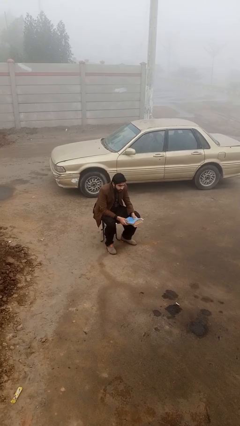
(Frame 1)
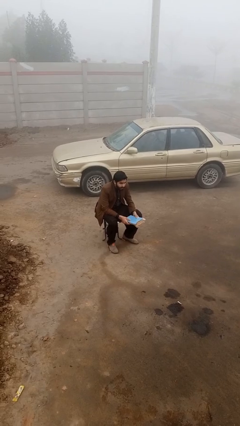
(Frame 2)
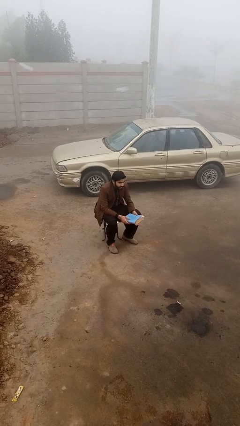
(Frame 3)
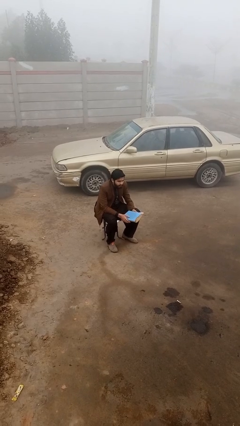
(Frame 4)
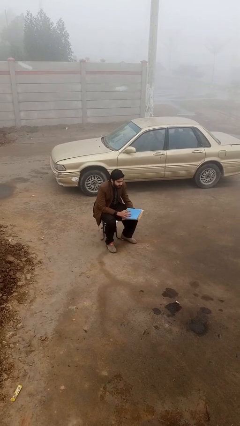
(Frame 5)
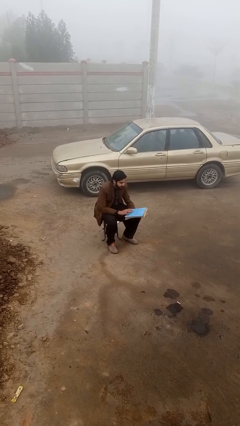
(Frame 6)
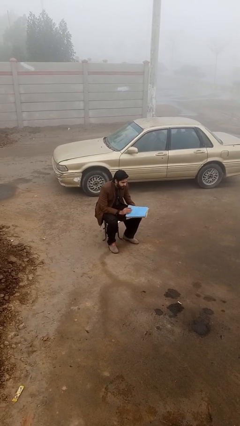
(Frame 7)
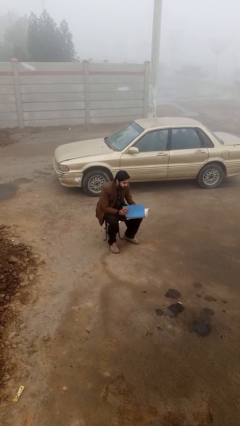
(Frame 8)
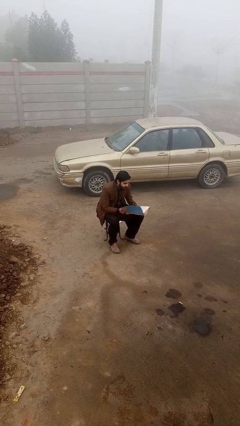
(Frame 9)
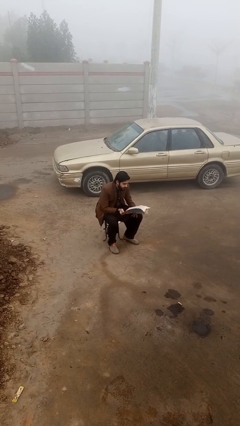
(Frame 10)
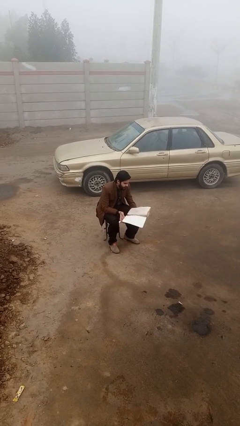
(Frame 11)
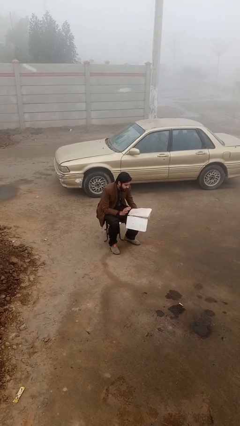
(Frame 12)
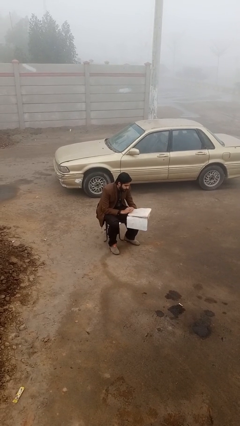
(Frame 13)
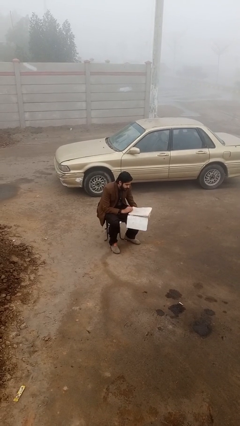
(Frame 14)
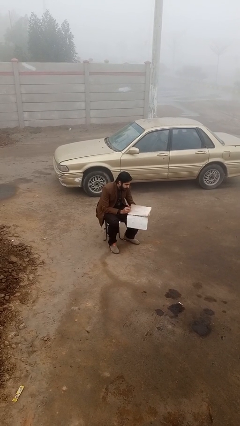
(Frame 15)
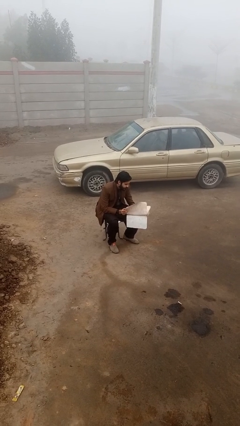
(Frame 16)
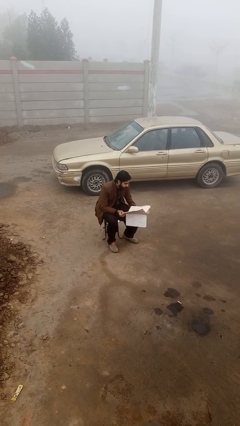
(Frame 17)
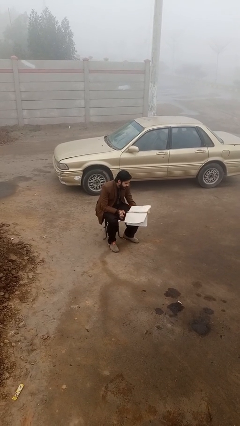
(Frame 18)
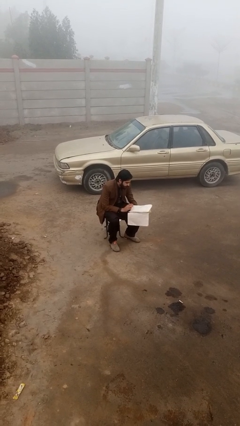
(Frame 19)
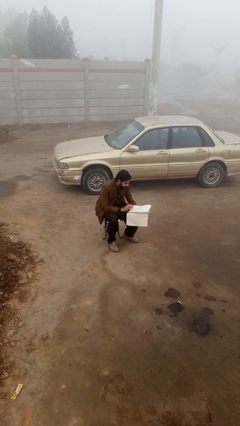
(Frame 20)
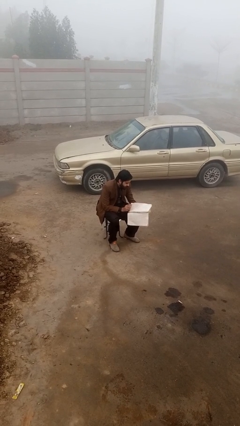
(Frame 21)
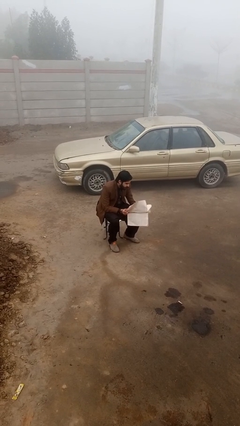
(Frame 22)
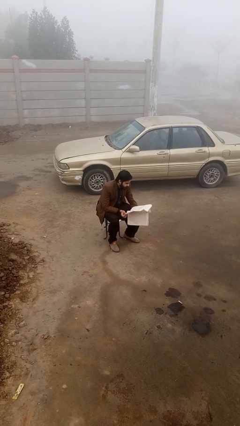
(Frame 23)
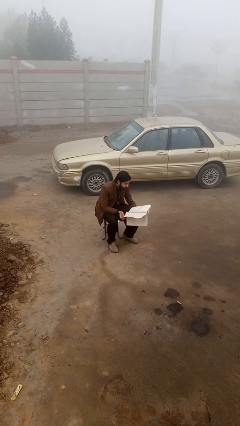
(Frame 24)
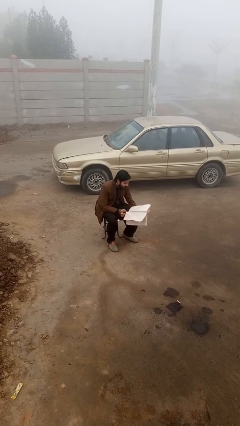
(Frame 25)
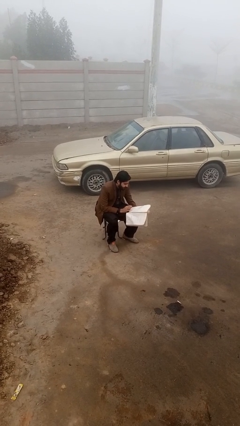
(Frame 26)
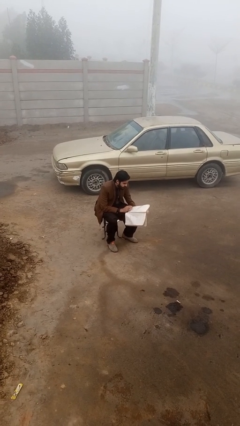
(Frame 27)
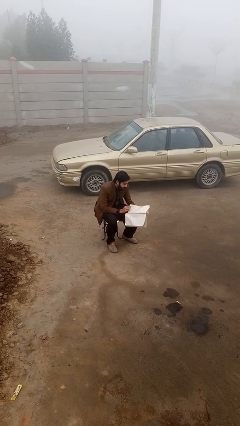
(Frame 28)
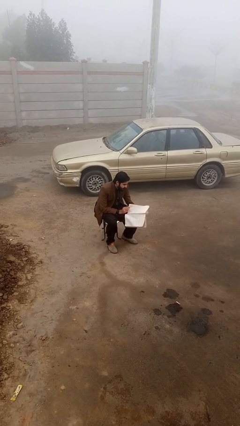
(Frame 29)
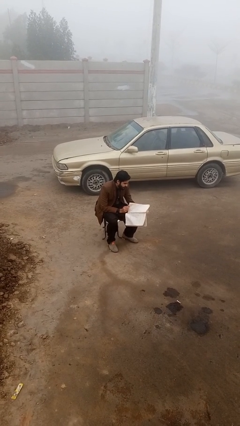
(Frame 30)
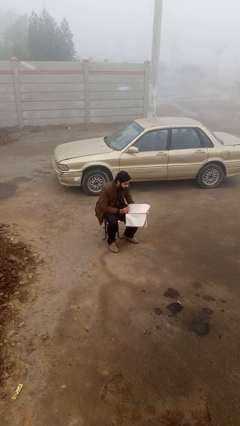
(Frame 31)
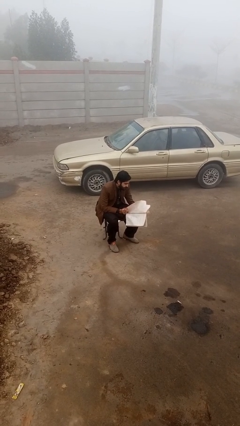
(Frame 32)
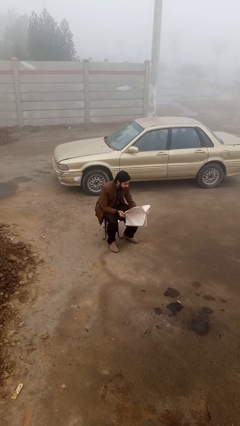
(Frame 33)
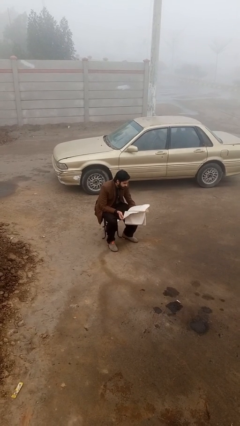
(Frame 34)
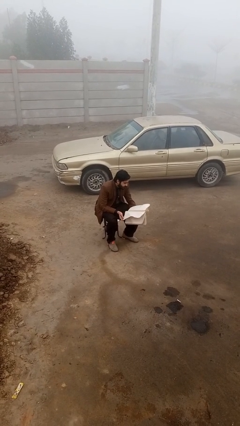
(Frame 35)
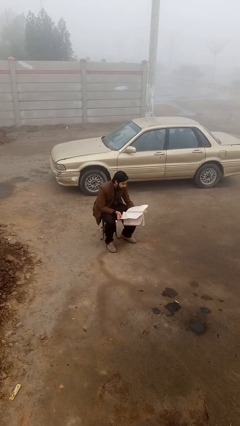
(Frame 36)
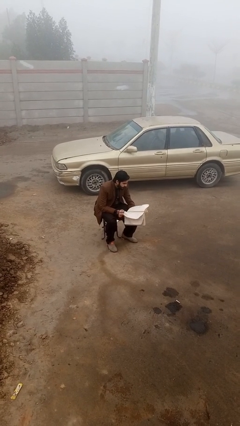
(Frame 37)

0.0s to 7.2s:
person reads document

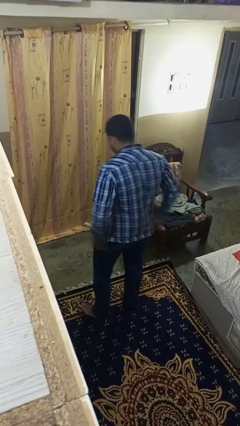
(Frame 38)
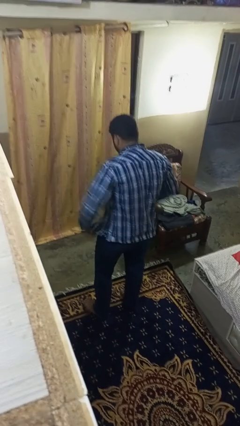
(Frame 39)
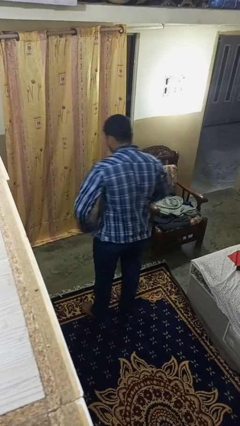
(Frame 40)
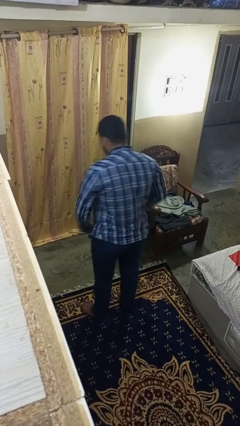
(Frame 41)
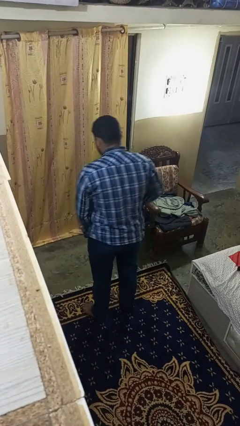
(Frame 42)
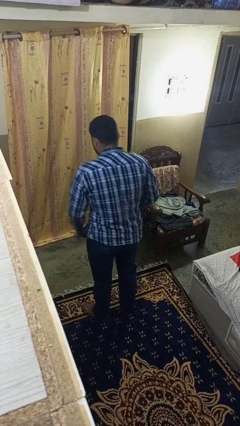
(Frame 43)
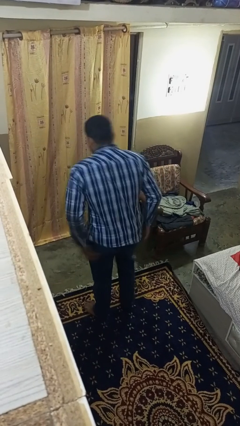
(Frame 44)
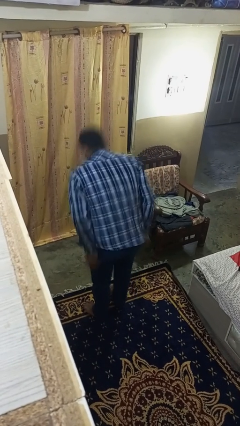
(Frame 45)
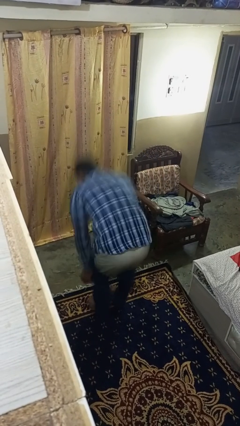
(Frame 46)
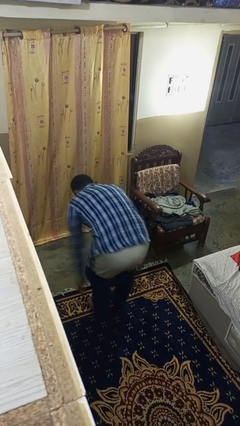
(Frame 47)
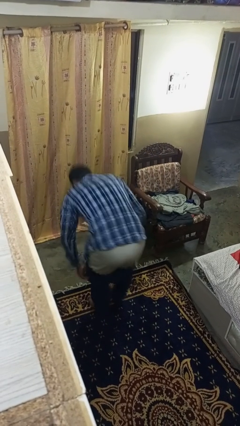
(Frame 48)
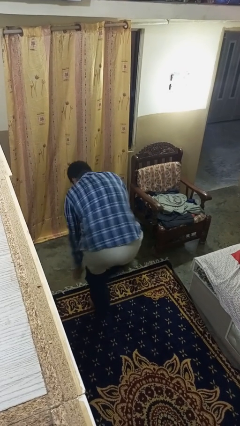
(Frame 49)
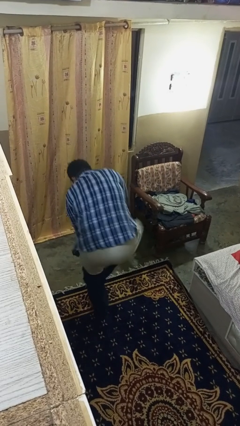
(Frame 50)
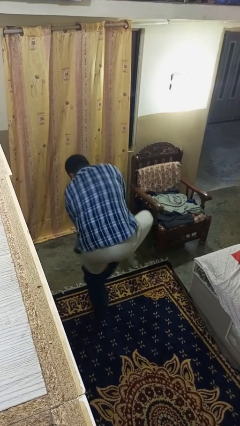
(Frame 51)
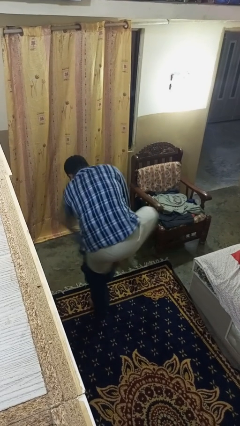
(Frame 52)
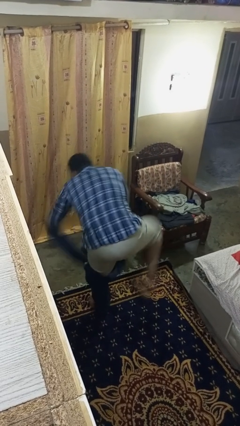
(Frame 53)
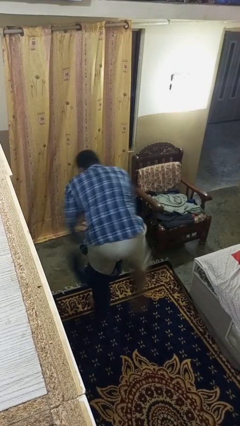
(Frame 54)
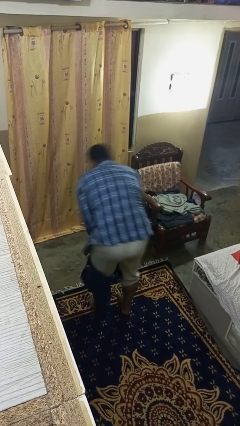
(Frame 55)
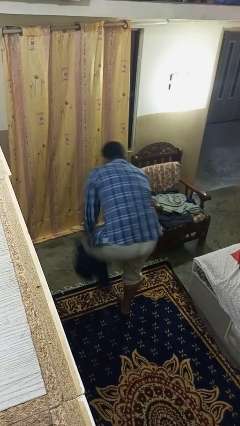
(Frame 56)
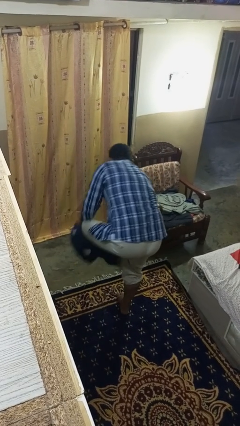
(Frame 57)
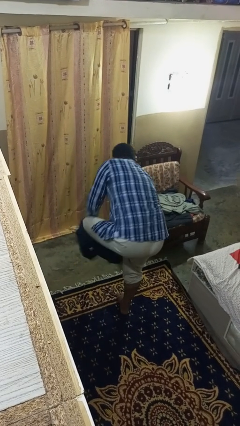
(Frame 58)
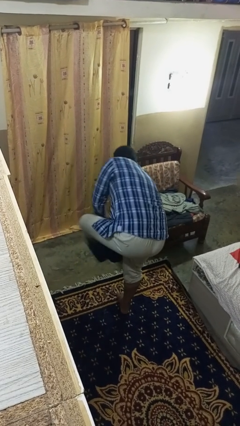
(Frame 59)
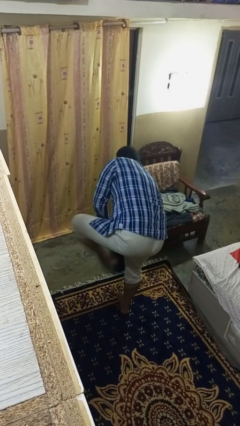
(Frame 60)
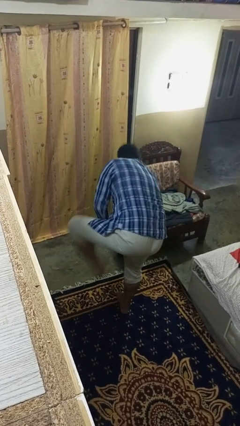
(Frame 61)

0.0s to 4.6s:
person takes off pants

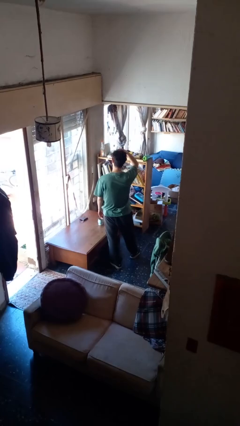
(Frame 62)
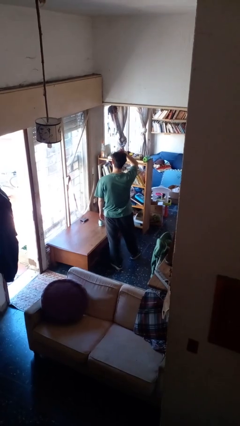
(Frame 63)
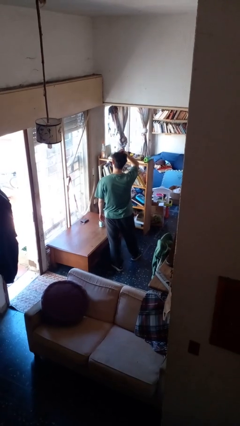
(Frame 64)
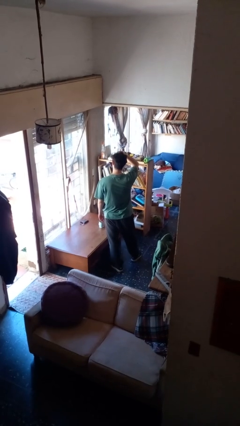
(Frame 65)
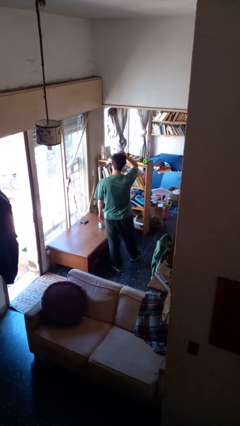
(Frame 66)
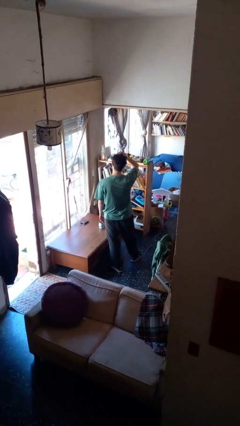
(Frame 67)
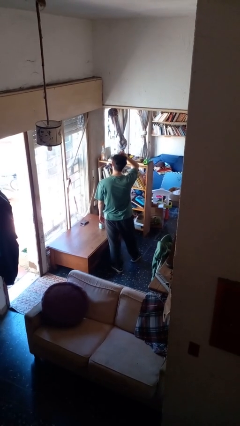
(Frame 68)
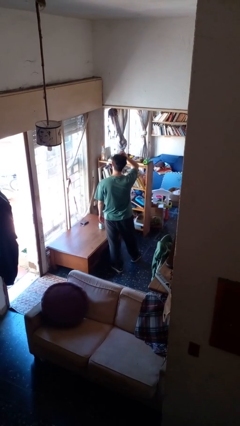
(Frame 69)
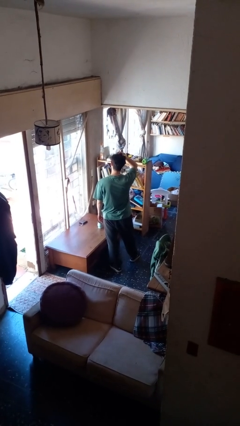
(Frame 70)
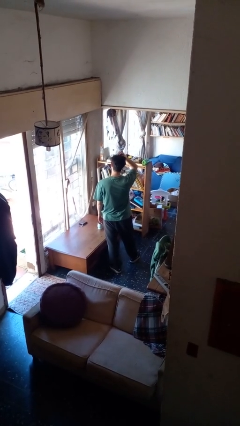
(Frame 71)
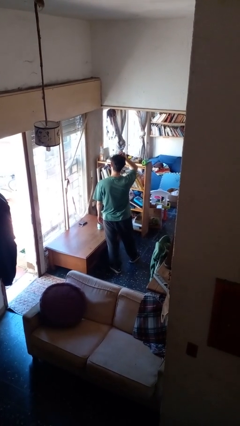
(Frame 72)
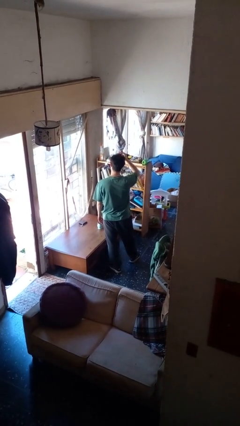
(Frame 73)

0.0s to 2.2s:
person pats head

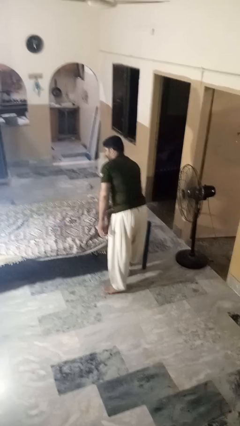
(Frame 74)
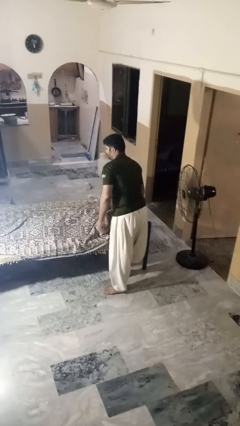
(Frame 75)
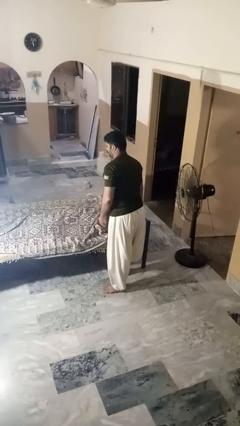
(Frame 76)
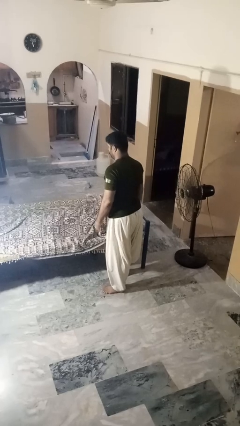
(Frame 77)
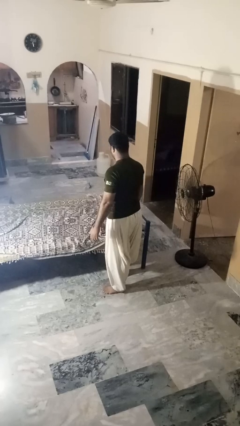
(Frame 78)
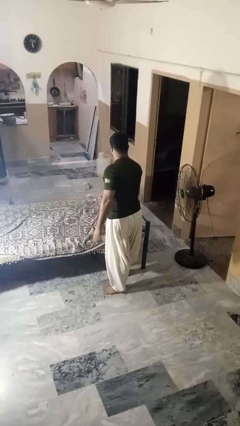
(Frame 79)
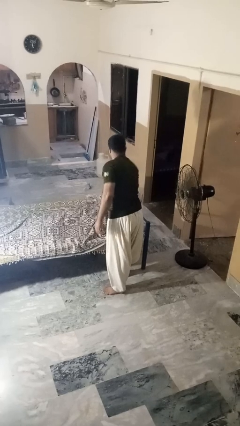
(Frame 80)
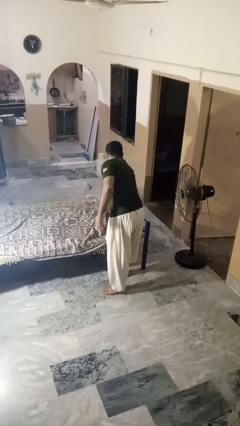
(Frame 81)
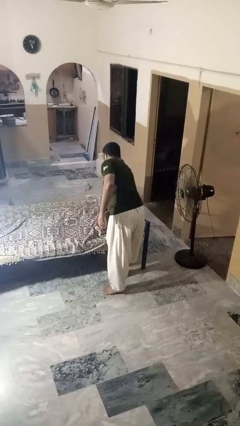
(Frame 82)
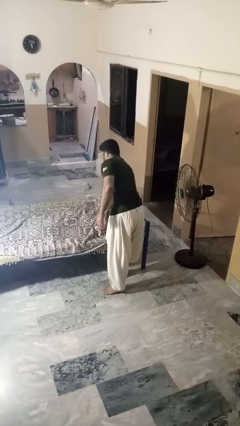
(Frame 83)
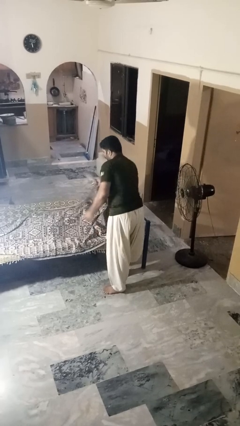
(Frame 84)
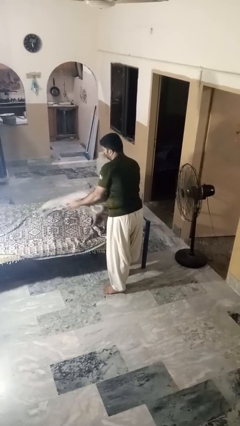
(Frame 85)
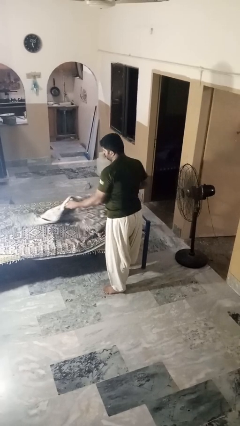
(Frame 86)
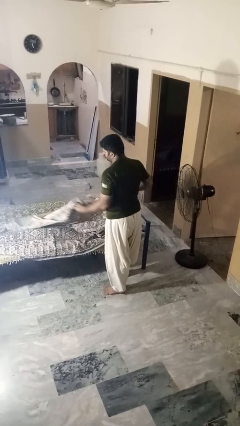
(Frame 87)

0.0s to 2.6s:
person uncovers friend with blanket

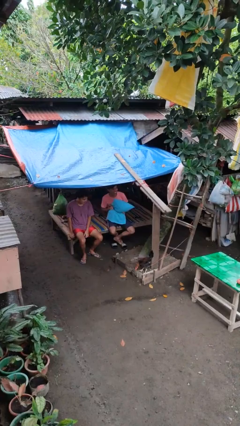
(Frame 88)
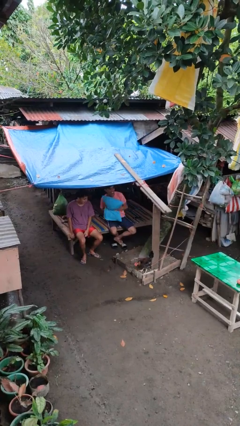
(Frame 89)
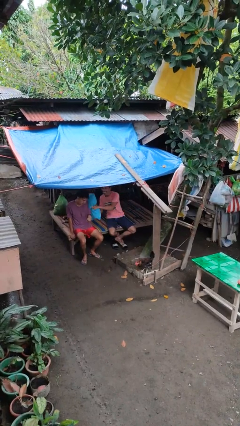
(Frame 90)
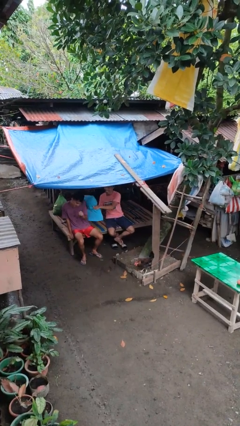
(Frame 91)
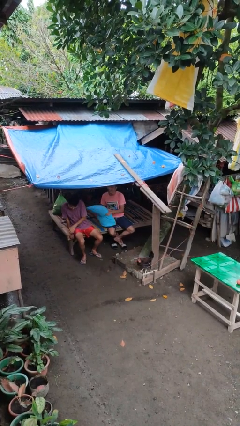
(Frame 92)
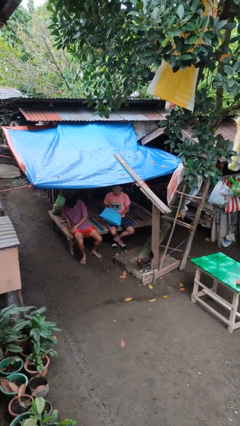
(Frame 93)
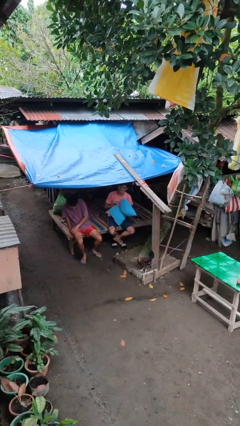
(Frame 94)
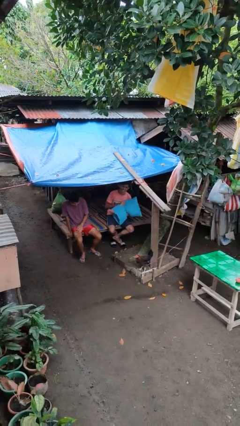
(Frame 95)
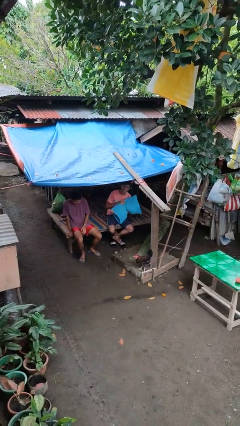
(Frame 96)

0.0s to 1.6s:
person hits person with pillow
